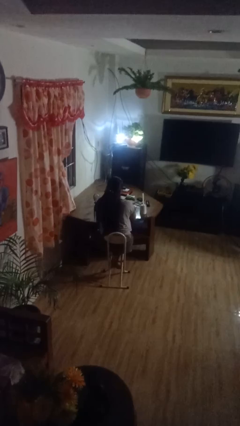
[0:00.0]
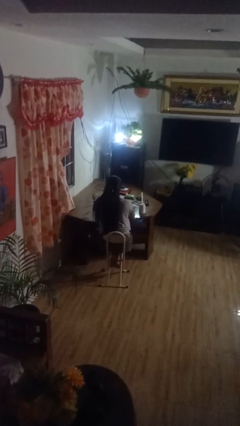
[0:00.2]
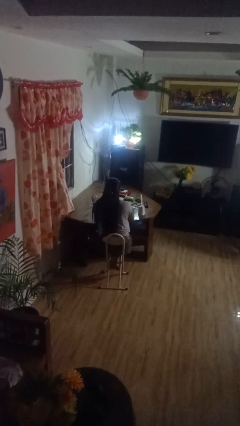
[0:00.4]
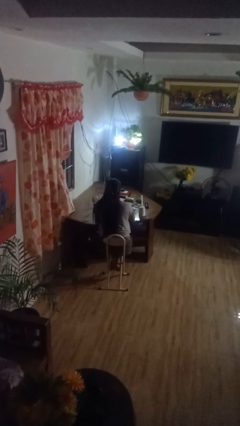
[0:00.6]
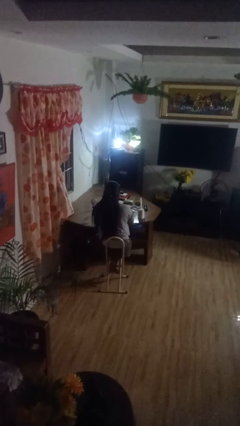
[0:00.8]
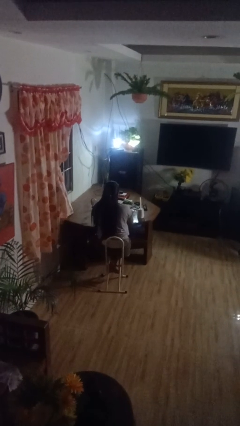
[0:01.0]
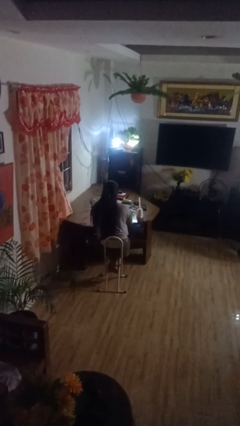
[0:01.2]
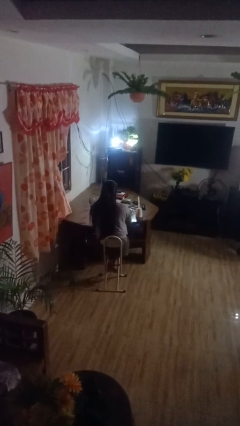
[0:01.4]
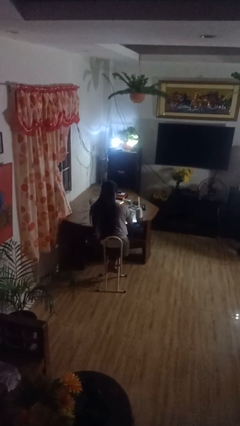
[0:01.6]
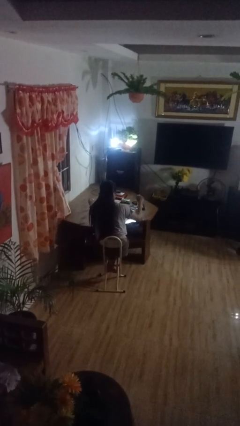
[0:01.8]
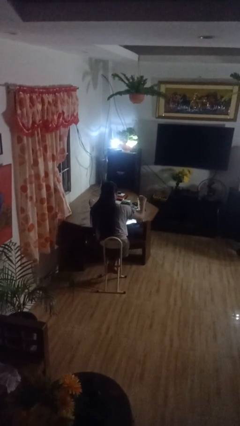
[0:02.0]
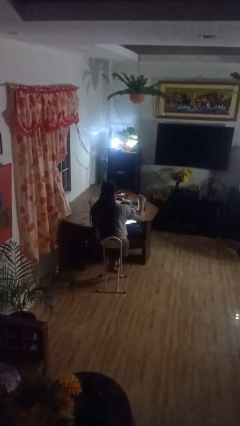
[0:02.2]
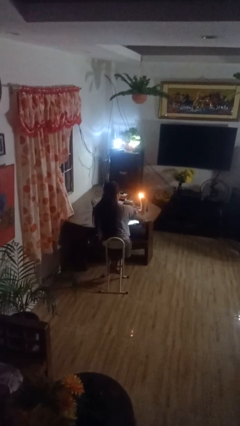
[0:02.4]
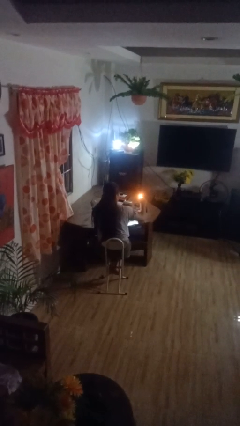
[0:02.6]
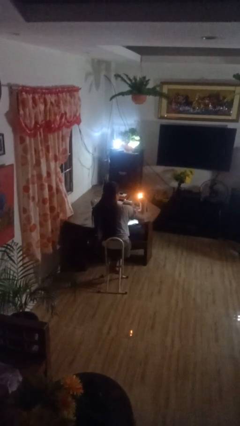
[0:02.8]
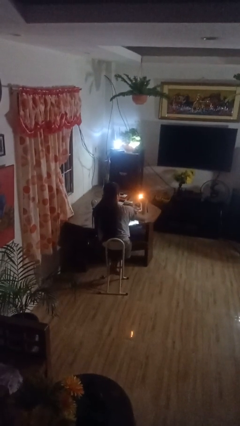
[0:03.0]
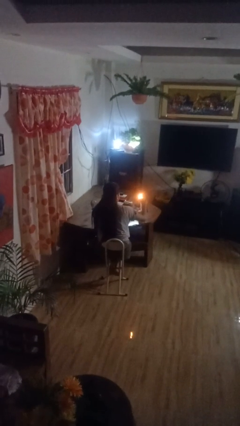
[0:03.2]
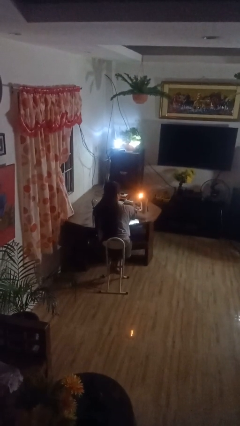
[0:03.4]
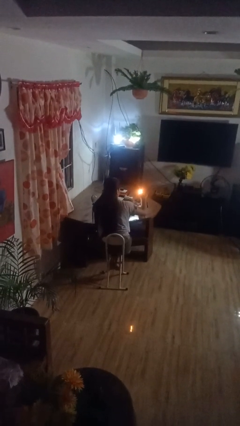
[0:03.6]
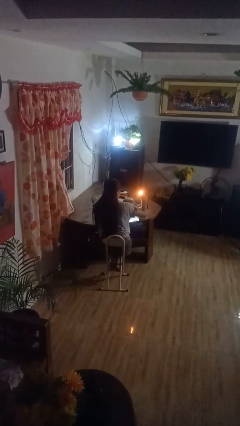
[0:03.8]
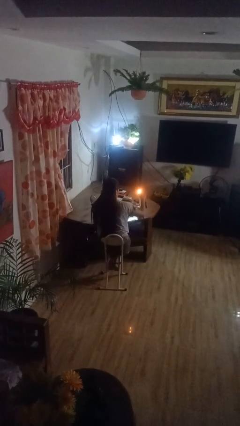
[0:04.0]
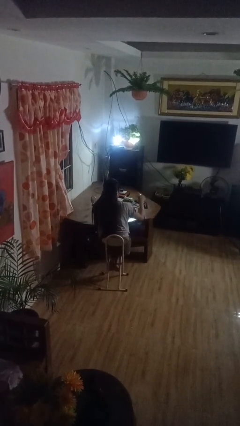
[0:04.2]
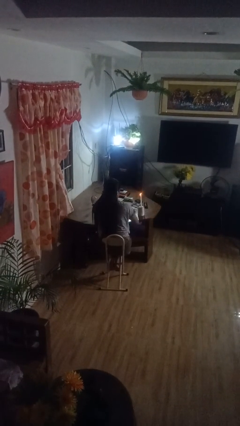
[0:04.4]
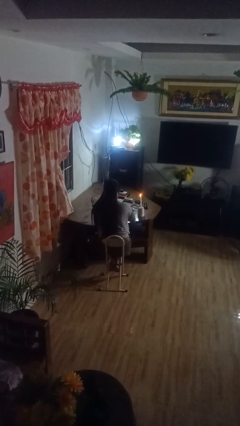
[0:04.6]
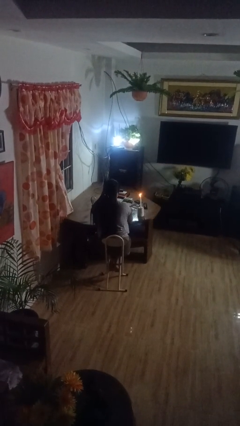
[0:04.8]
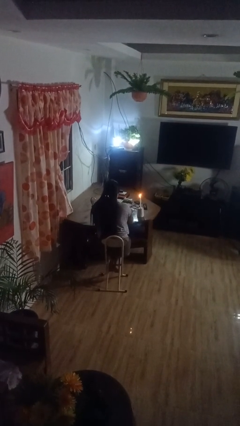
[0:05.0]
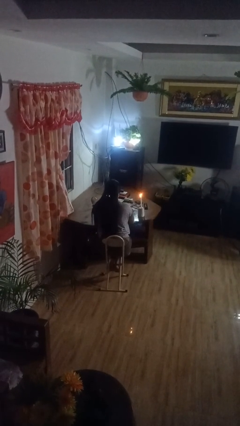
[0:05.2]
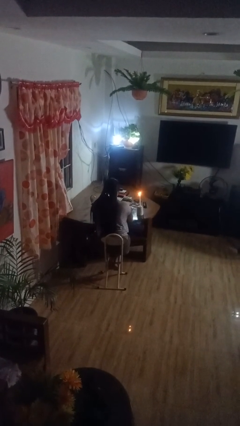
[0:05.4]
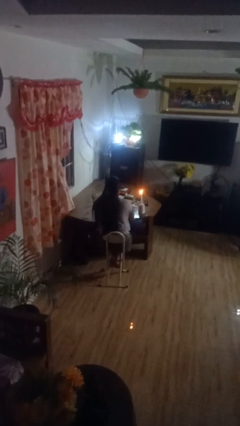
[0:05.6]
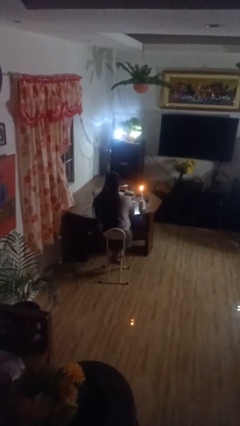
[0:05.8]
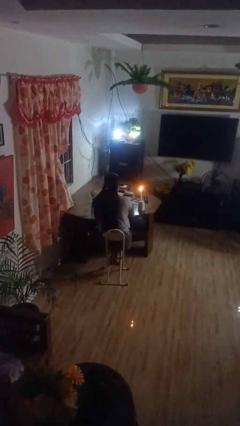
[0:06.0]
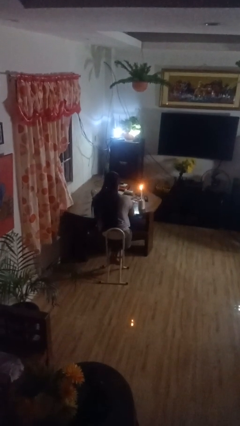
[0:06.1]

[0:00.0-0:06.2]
person lights candle

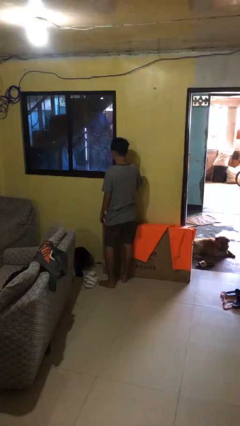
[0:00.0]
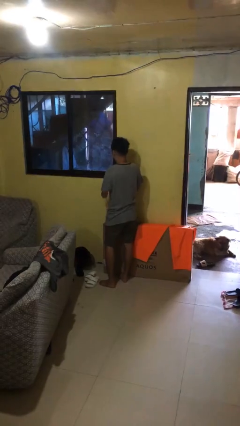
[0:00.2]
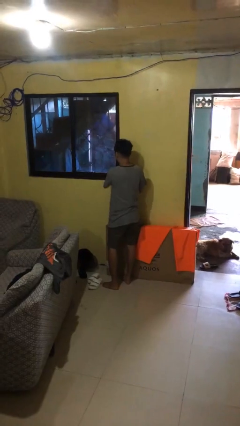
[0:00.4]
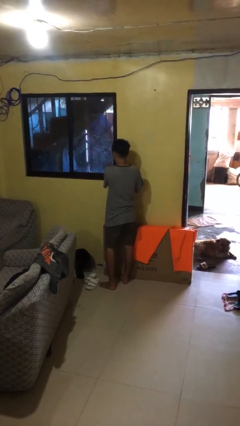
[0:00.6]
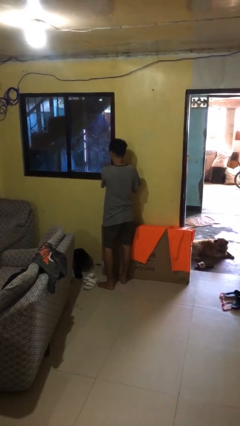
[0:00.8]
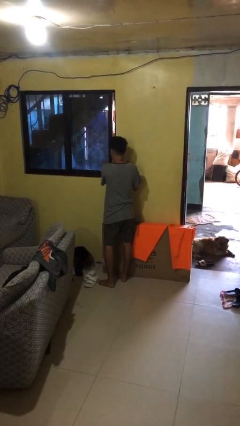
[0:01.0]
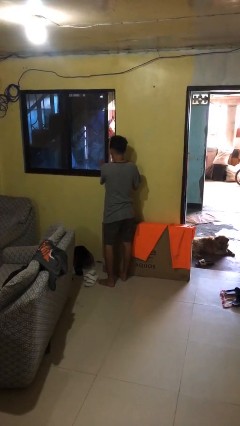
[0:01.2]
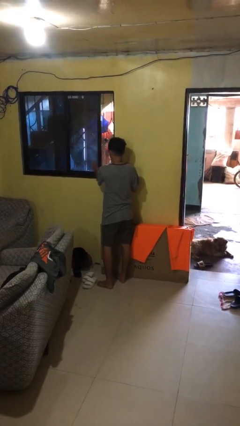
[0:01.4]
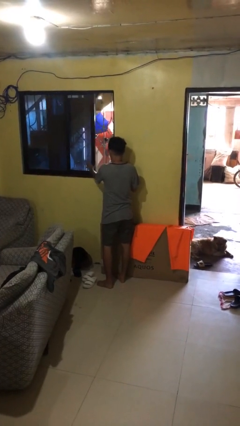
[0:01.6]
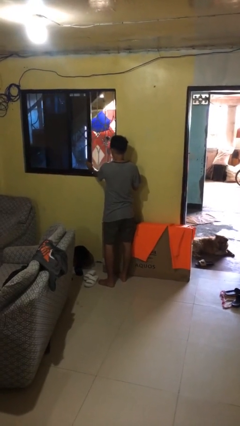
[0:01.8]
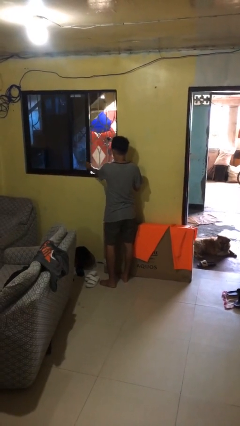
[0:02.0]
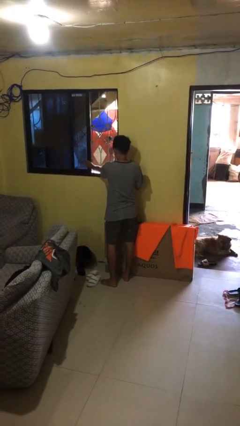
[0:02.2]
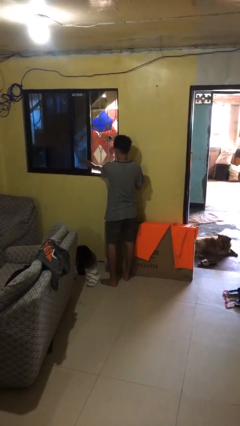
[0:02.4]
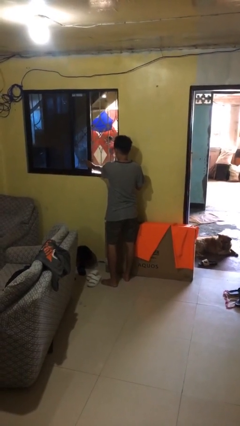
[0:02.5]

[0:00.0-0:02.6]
person opens home window

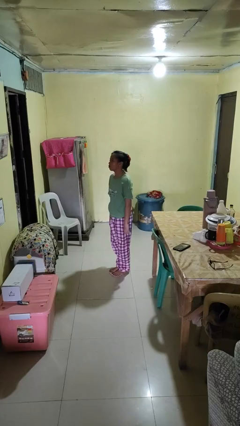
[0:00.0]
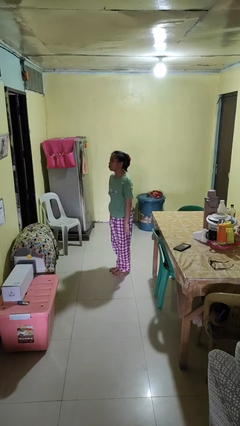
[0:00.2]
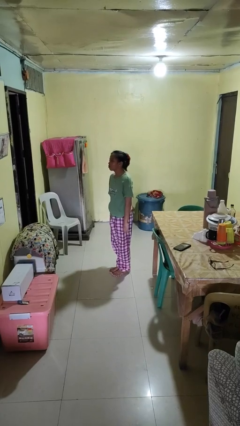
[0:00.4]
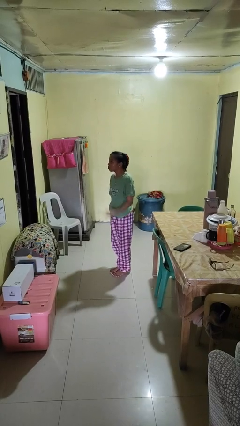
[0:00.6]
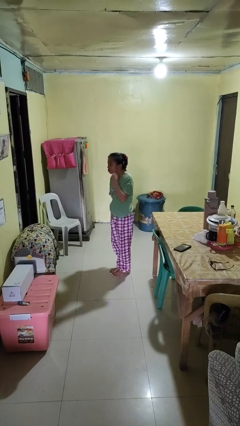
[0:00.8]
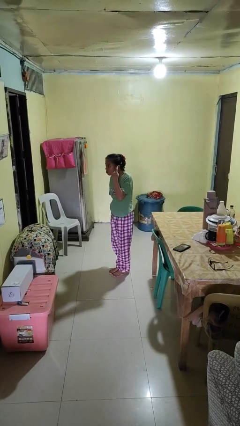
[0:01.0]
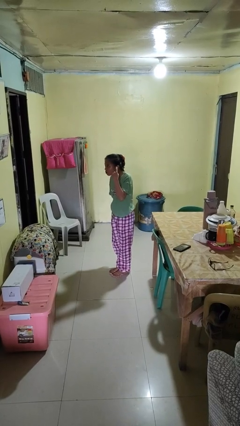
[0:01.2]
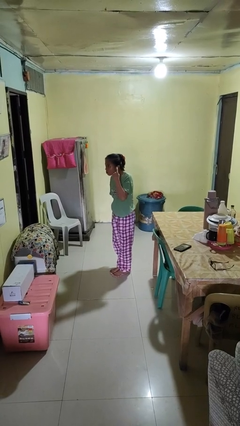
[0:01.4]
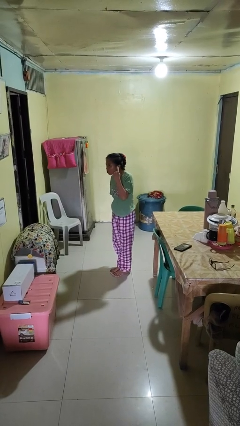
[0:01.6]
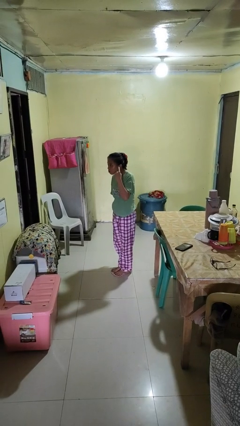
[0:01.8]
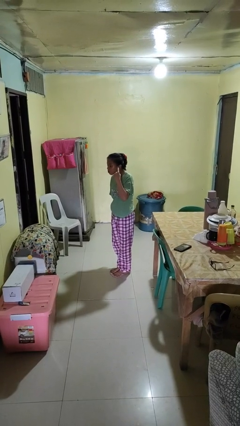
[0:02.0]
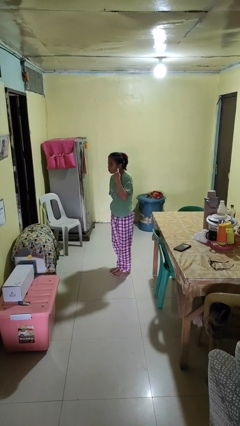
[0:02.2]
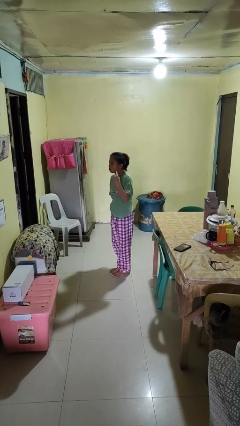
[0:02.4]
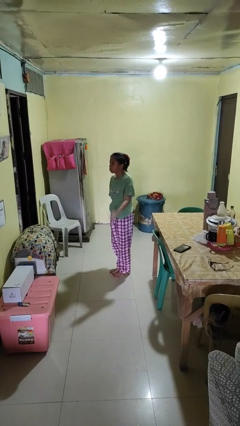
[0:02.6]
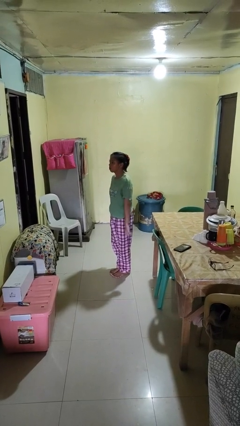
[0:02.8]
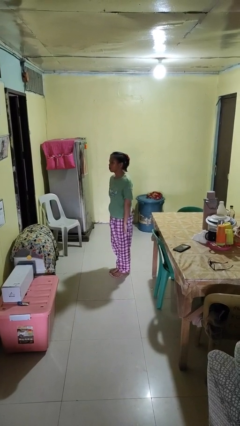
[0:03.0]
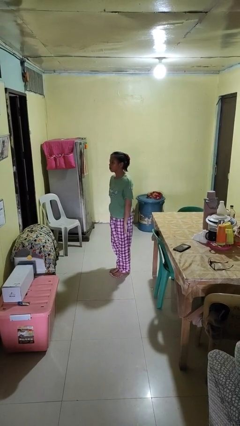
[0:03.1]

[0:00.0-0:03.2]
person gestures listen closely

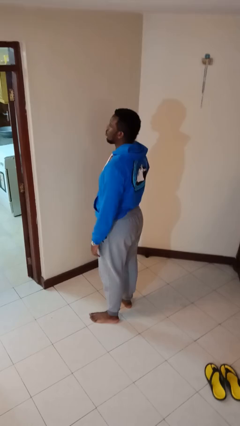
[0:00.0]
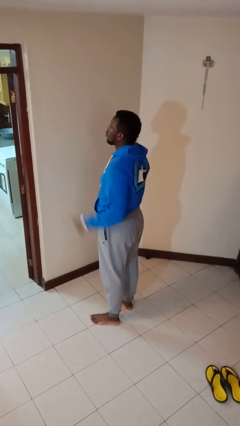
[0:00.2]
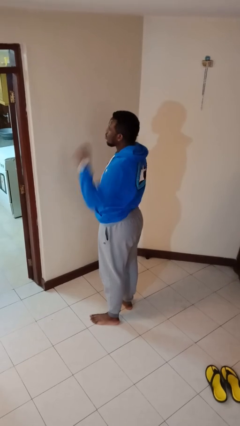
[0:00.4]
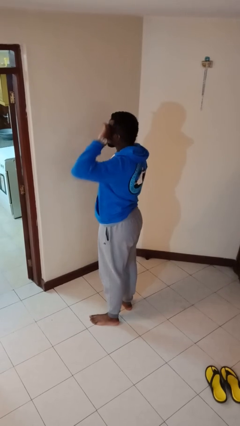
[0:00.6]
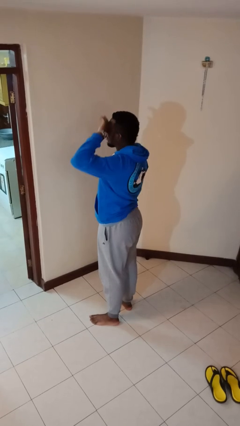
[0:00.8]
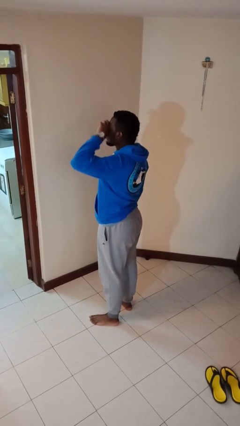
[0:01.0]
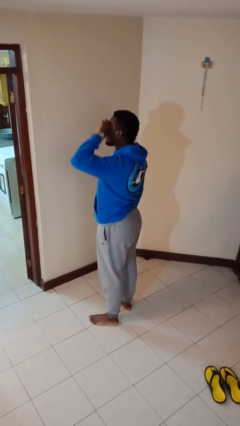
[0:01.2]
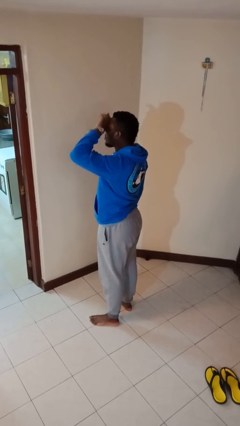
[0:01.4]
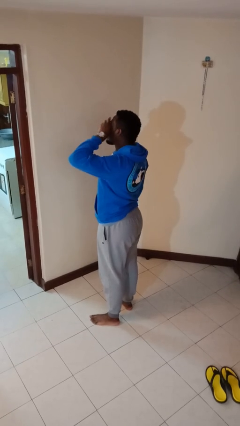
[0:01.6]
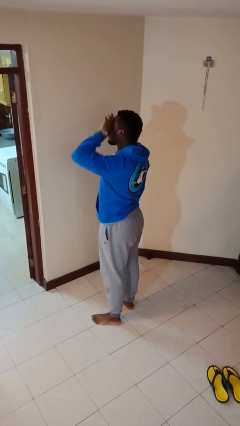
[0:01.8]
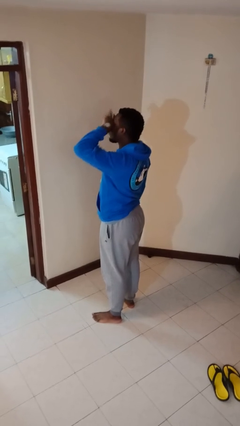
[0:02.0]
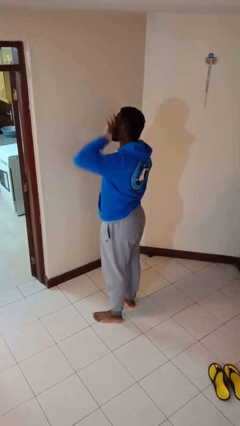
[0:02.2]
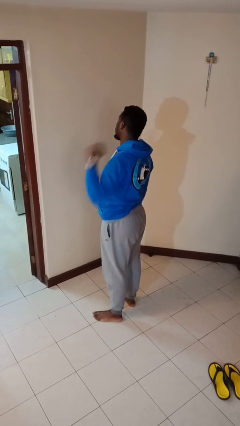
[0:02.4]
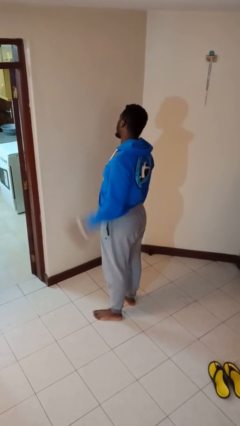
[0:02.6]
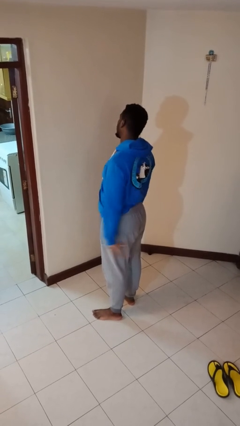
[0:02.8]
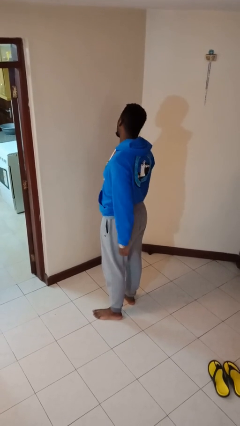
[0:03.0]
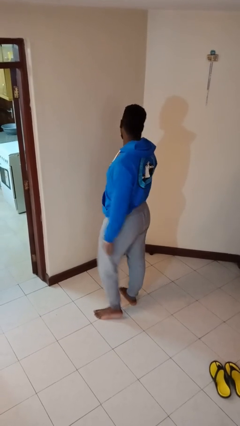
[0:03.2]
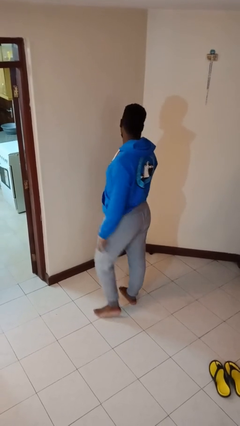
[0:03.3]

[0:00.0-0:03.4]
person rubs eyes

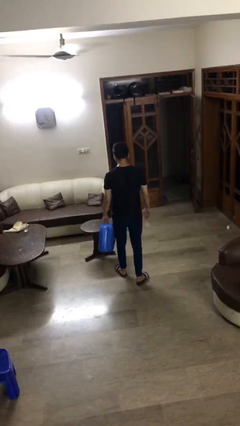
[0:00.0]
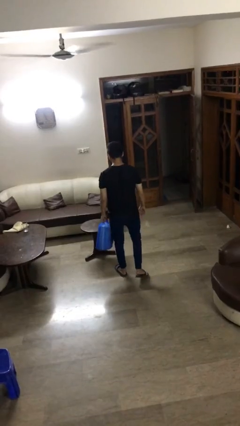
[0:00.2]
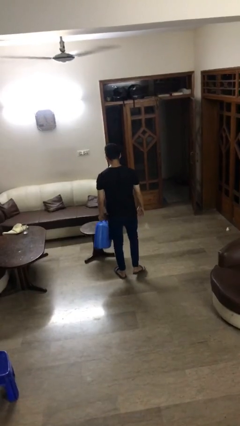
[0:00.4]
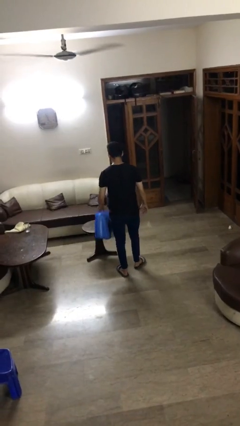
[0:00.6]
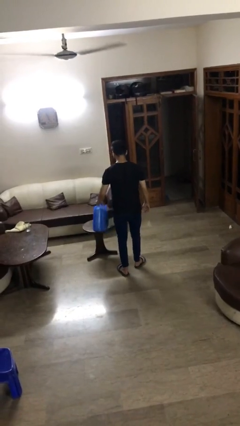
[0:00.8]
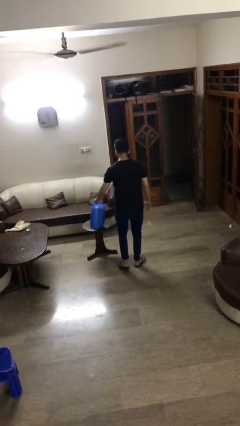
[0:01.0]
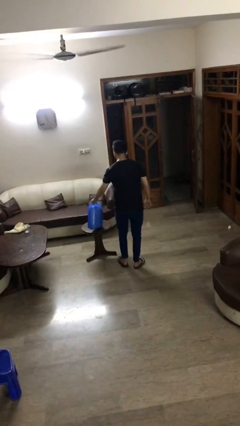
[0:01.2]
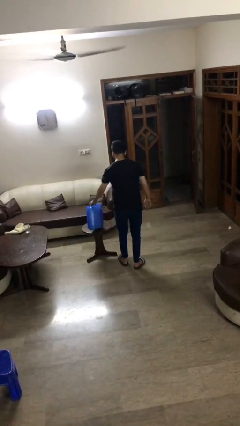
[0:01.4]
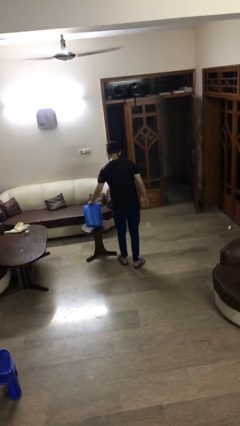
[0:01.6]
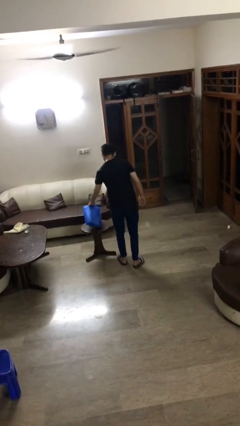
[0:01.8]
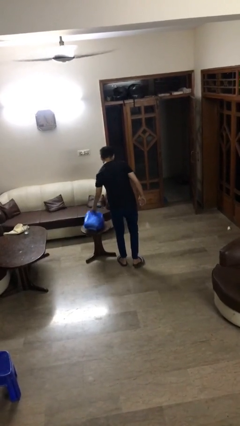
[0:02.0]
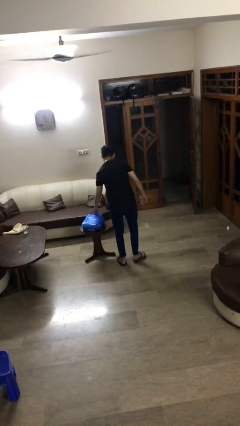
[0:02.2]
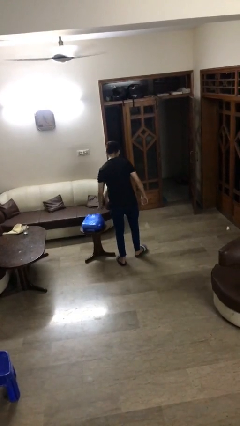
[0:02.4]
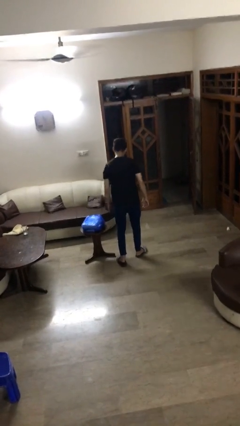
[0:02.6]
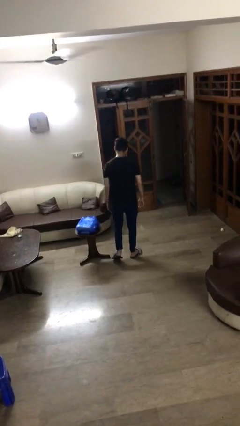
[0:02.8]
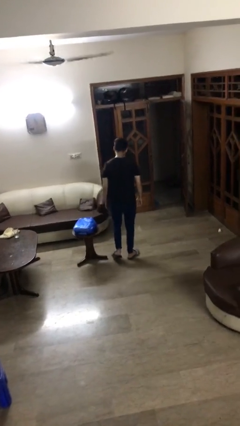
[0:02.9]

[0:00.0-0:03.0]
person puts down object on table
